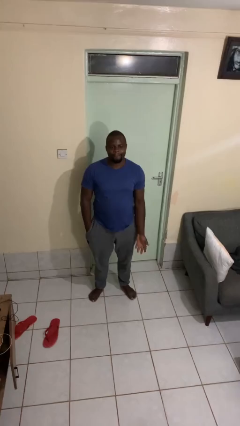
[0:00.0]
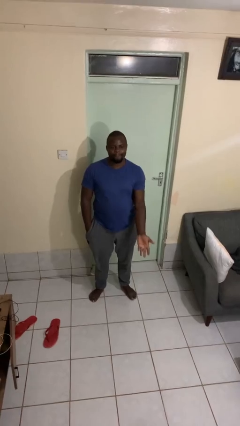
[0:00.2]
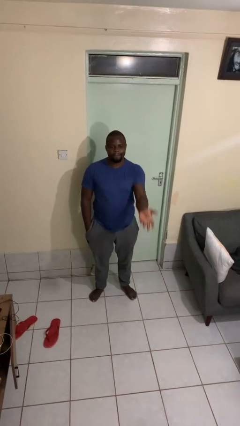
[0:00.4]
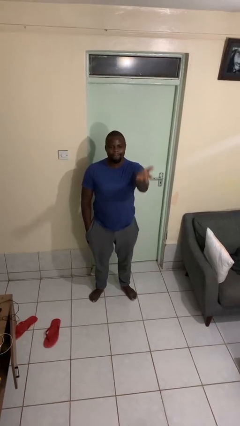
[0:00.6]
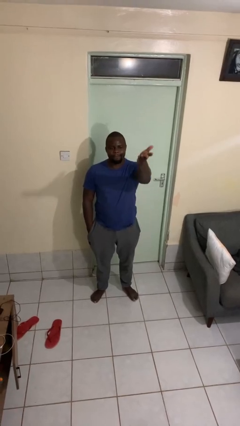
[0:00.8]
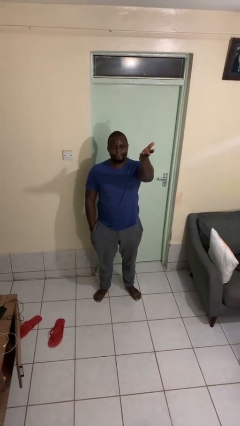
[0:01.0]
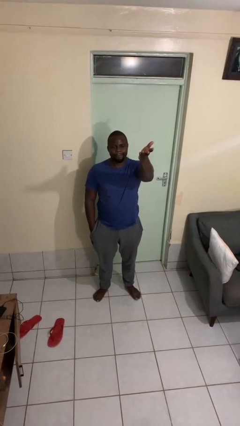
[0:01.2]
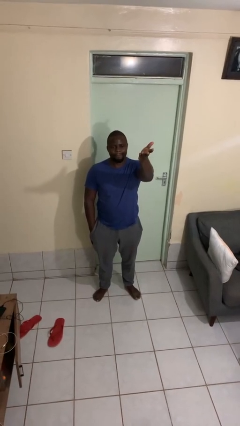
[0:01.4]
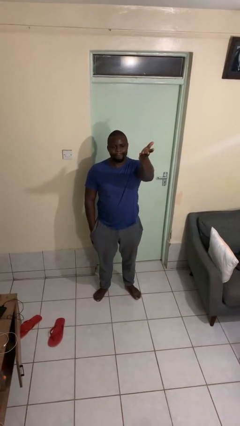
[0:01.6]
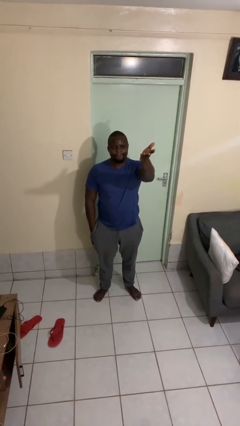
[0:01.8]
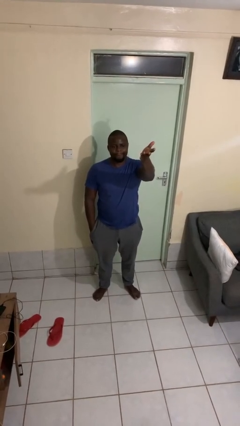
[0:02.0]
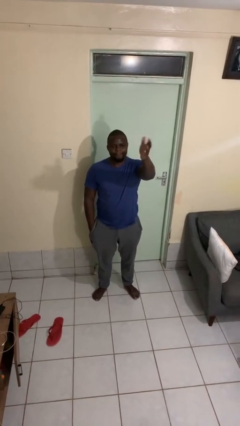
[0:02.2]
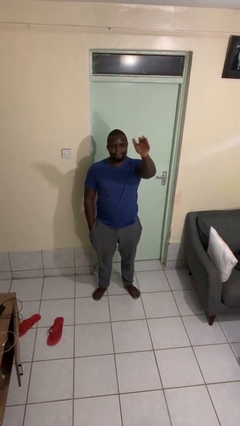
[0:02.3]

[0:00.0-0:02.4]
person gestures swipe up

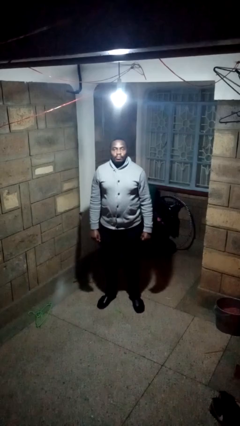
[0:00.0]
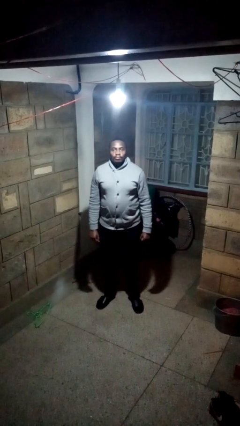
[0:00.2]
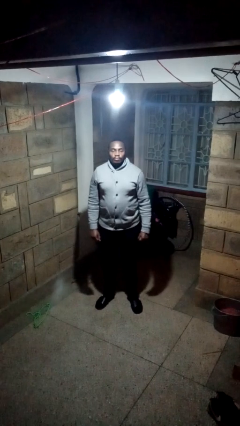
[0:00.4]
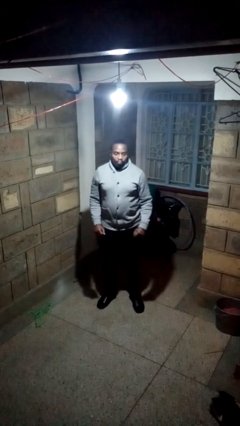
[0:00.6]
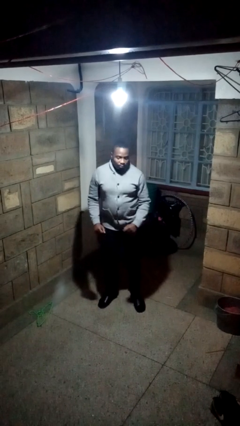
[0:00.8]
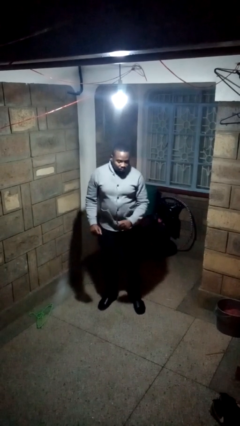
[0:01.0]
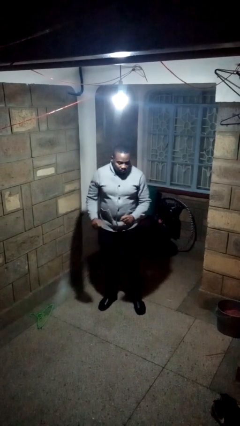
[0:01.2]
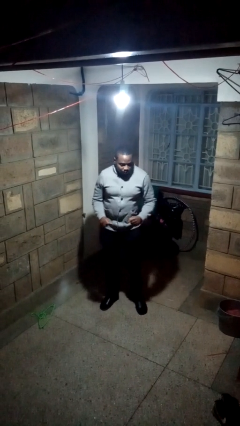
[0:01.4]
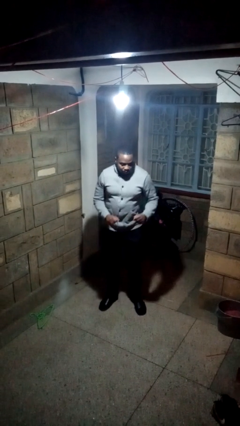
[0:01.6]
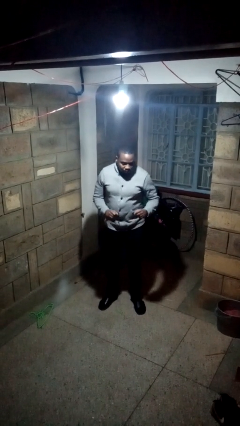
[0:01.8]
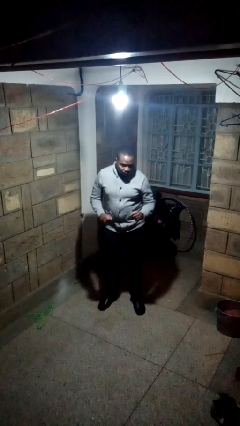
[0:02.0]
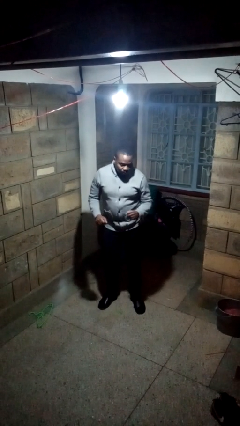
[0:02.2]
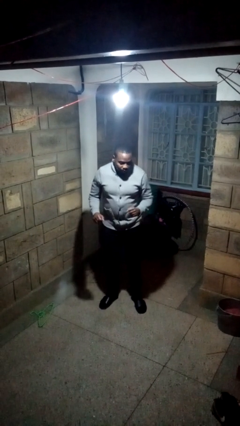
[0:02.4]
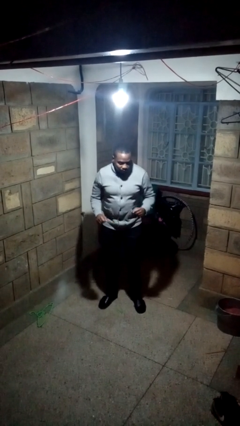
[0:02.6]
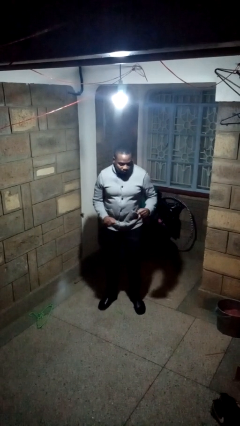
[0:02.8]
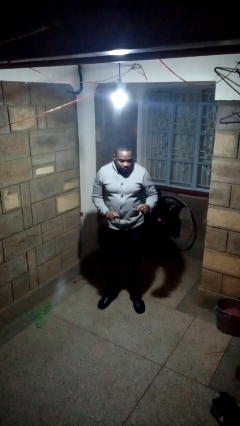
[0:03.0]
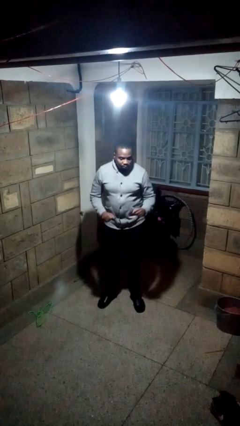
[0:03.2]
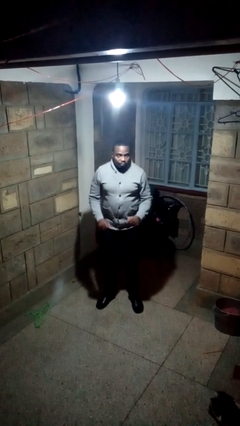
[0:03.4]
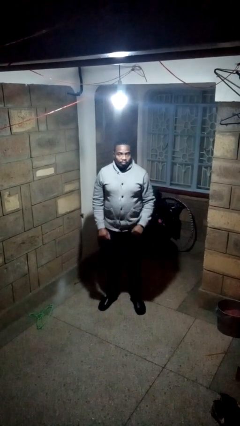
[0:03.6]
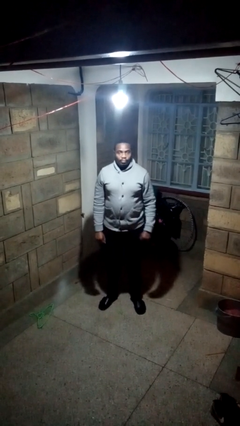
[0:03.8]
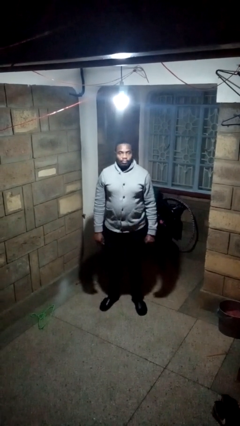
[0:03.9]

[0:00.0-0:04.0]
person dances in place

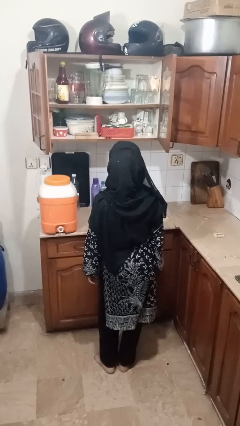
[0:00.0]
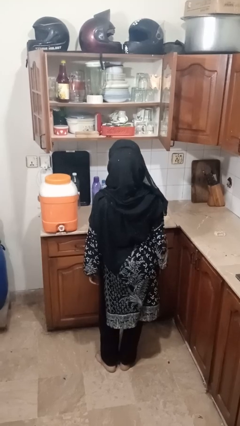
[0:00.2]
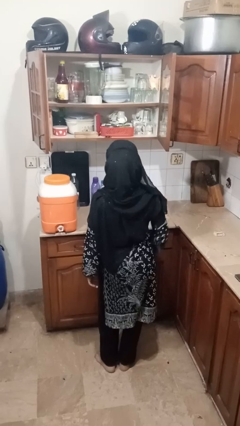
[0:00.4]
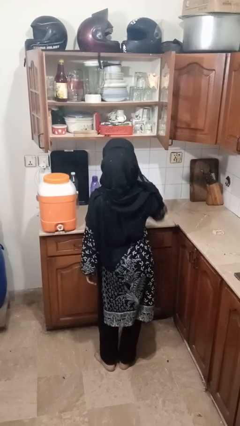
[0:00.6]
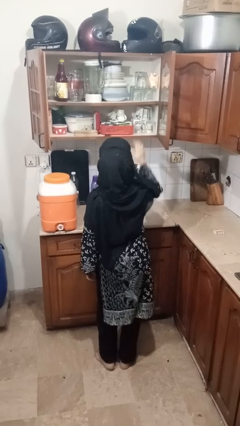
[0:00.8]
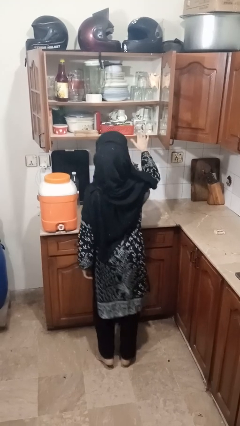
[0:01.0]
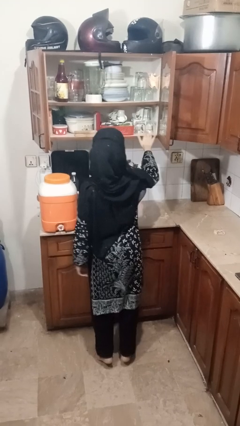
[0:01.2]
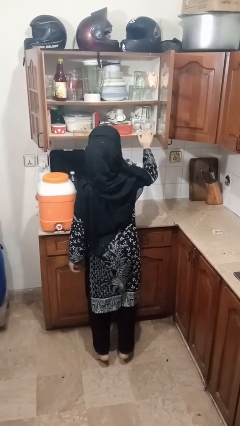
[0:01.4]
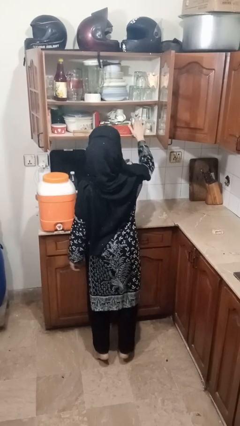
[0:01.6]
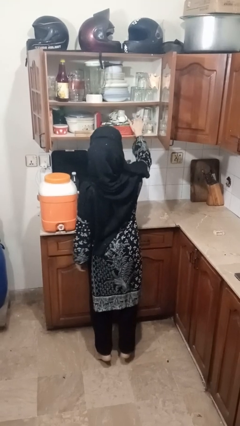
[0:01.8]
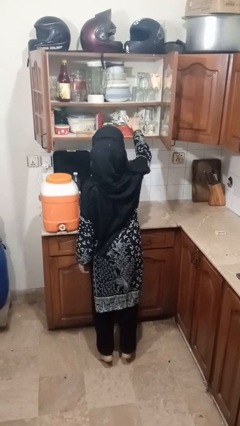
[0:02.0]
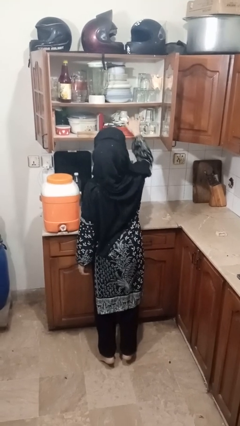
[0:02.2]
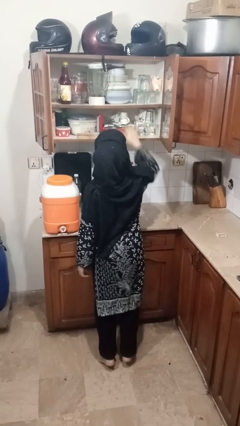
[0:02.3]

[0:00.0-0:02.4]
person searches in cabinet

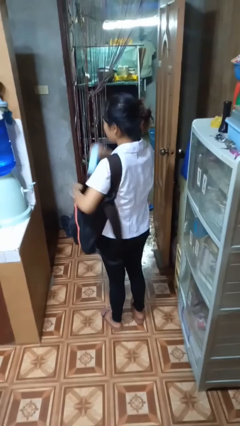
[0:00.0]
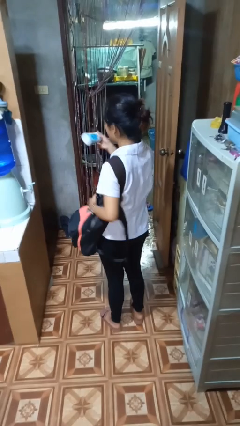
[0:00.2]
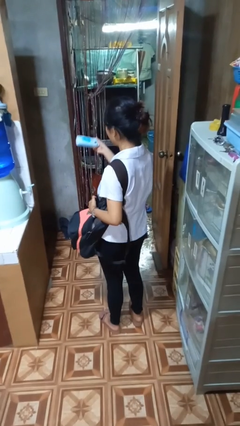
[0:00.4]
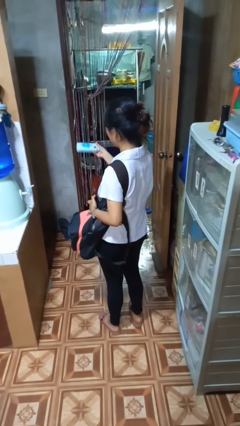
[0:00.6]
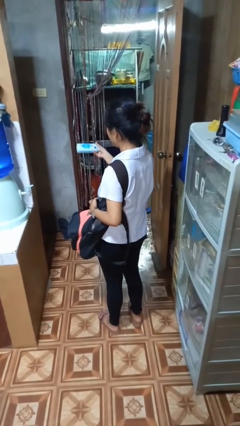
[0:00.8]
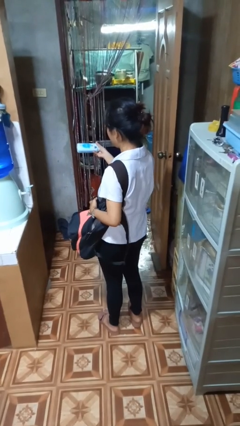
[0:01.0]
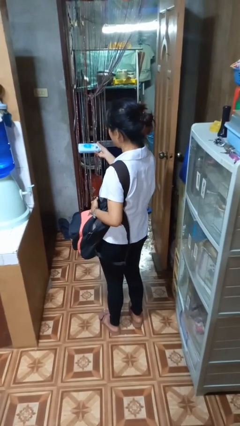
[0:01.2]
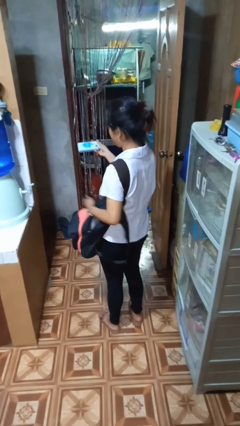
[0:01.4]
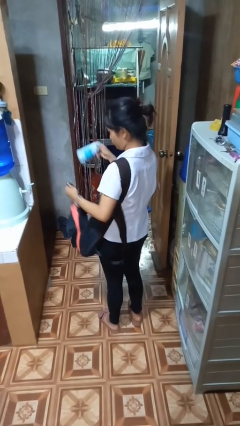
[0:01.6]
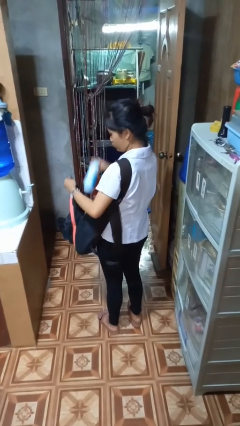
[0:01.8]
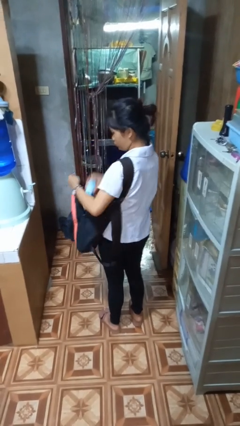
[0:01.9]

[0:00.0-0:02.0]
person takes object from backpack

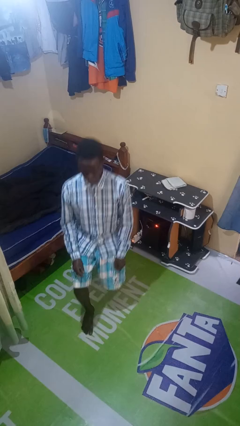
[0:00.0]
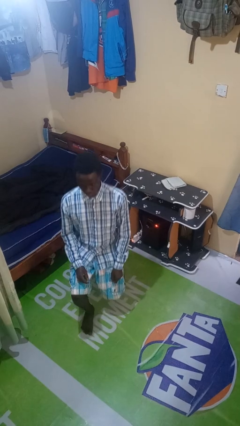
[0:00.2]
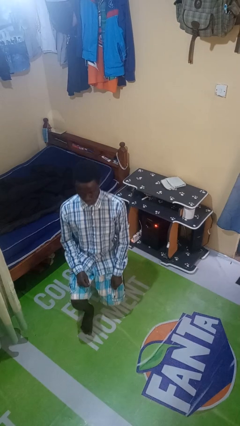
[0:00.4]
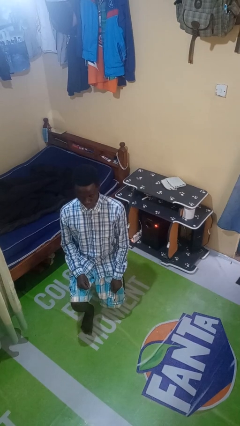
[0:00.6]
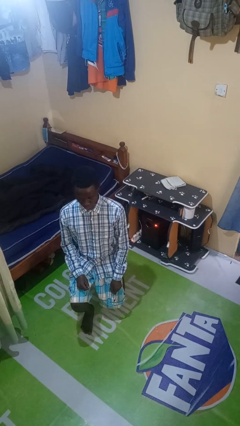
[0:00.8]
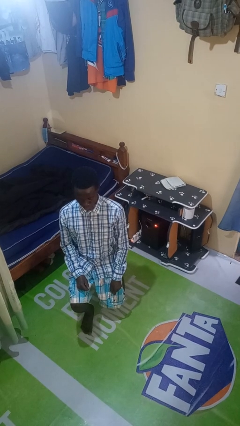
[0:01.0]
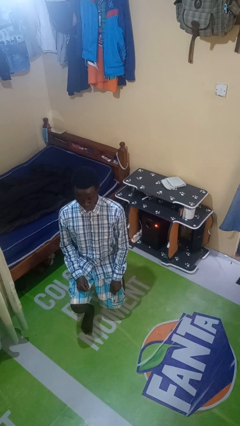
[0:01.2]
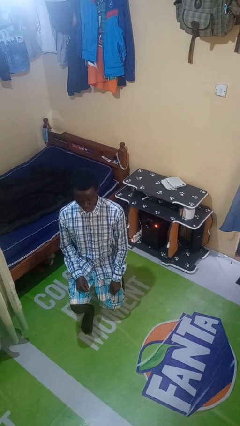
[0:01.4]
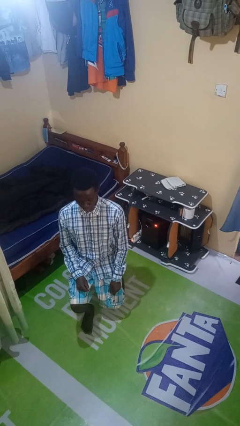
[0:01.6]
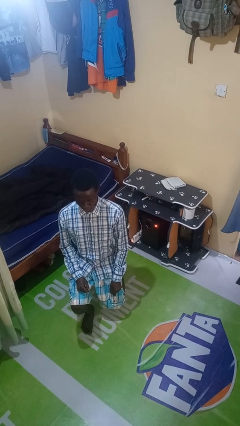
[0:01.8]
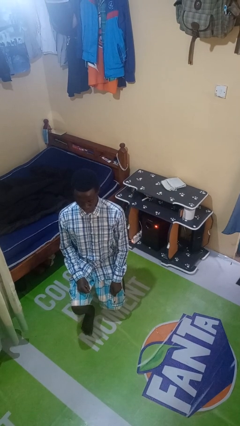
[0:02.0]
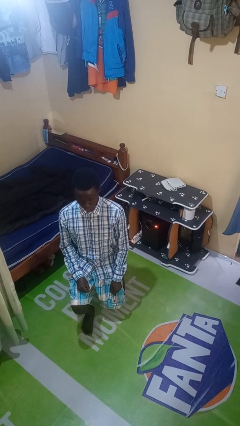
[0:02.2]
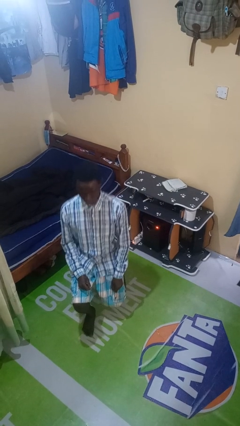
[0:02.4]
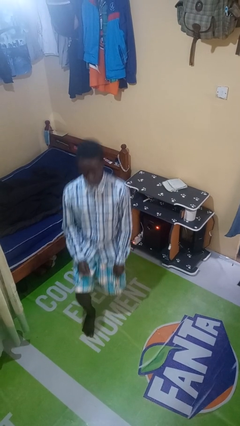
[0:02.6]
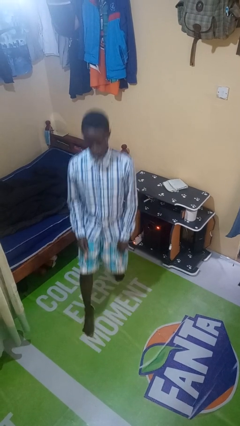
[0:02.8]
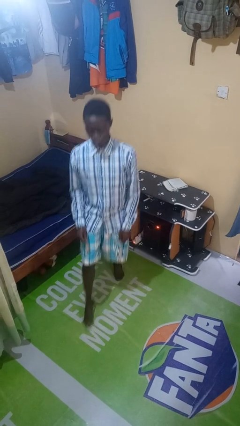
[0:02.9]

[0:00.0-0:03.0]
person exercises with lunges

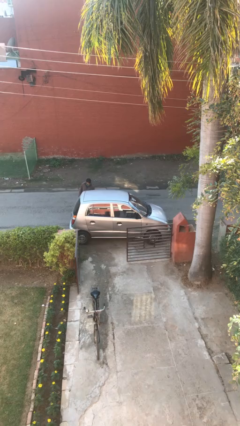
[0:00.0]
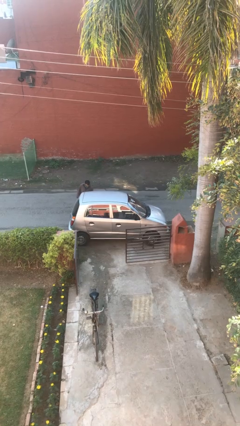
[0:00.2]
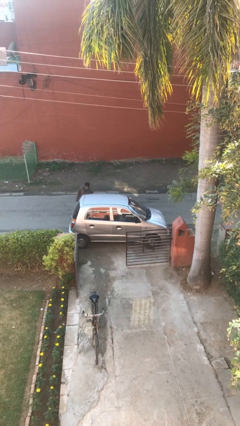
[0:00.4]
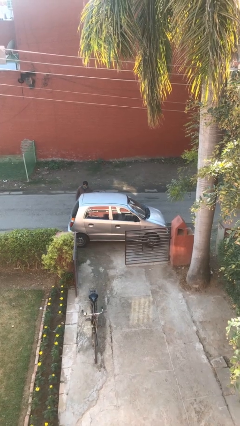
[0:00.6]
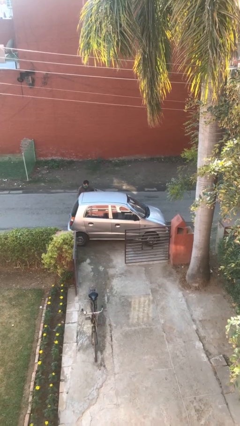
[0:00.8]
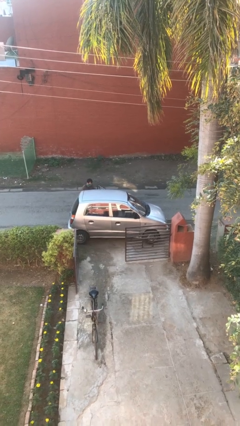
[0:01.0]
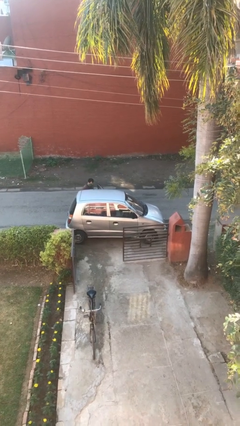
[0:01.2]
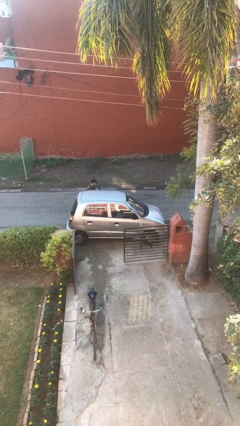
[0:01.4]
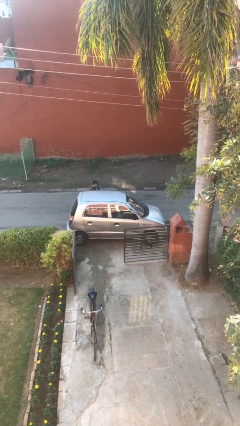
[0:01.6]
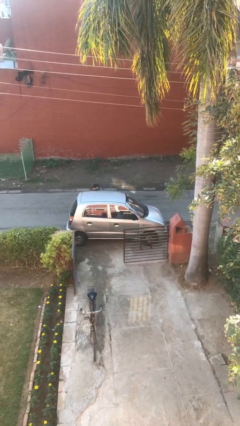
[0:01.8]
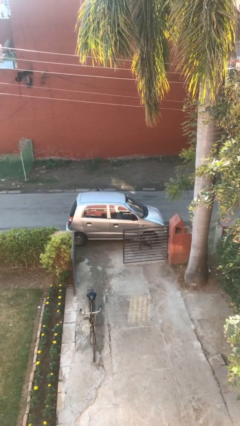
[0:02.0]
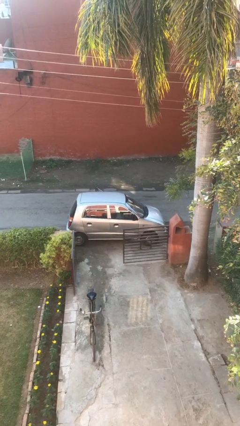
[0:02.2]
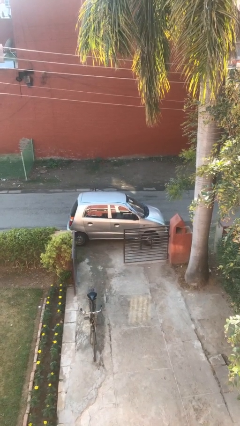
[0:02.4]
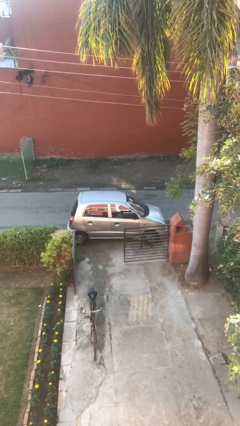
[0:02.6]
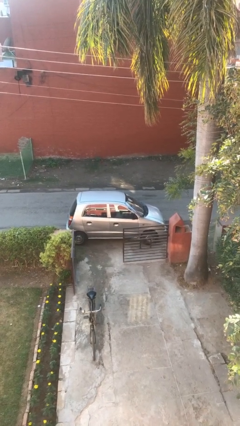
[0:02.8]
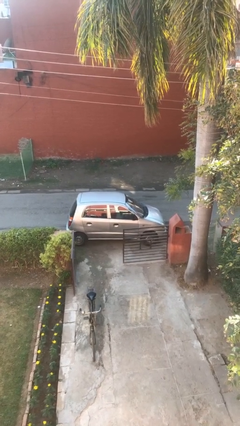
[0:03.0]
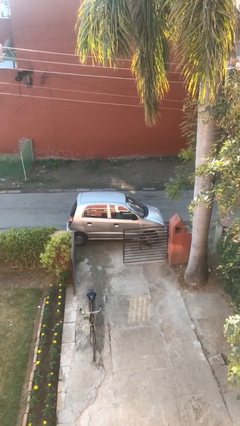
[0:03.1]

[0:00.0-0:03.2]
car picks up person

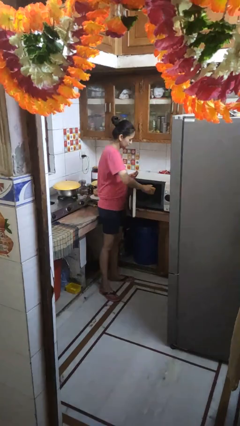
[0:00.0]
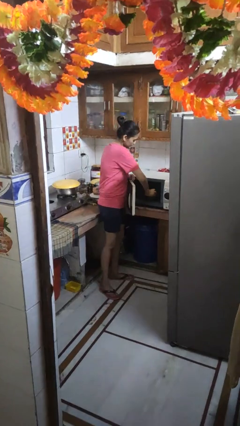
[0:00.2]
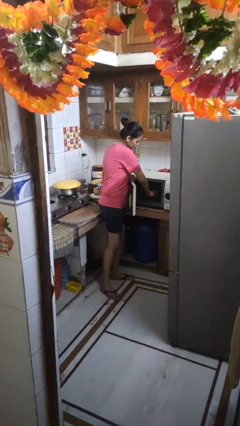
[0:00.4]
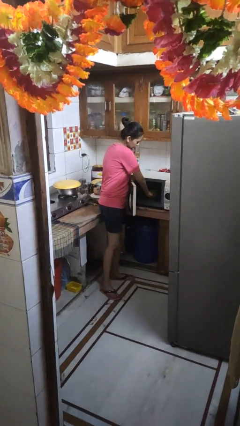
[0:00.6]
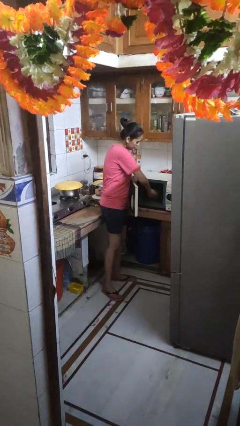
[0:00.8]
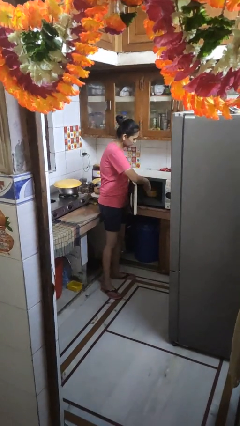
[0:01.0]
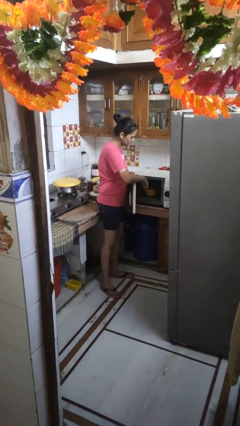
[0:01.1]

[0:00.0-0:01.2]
person puts object into microwave
